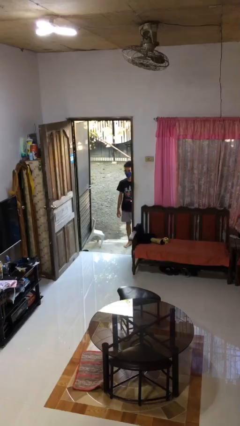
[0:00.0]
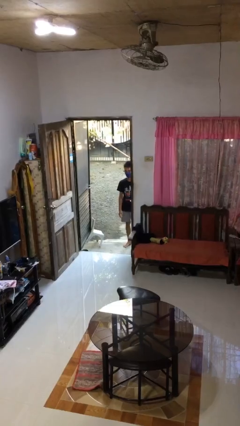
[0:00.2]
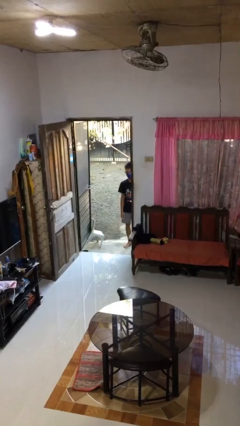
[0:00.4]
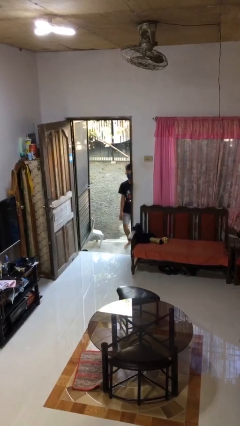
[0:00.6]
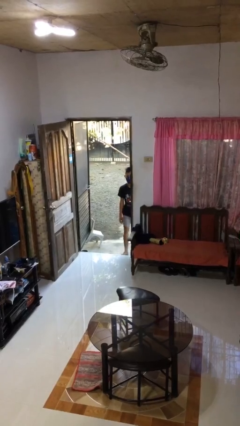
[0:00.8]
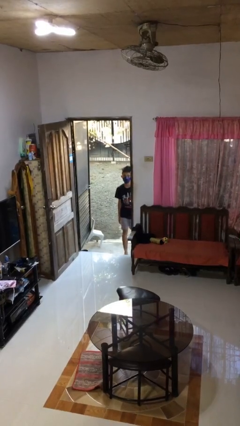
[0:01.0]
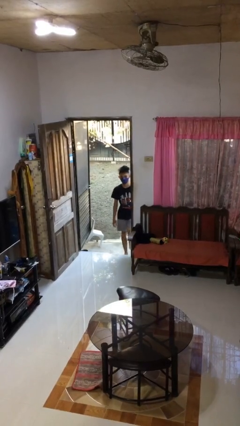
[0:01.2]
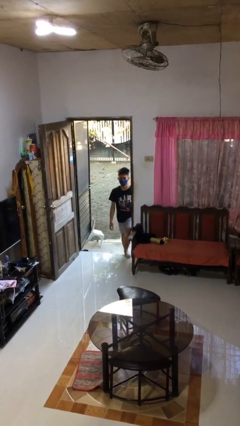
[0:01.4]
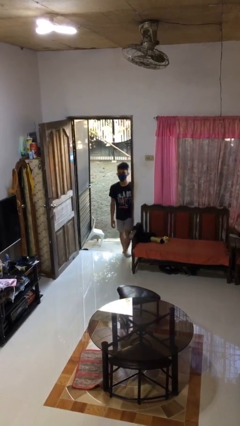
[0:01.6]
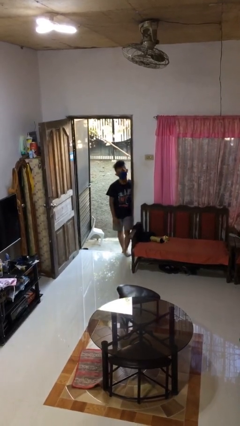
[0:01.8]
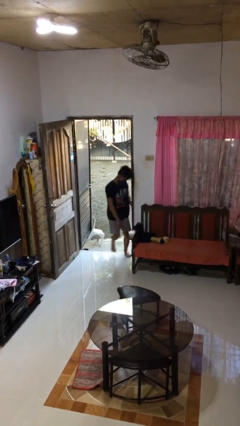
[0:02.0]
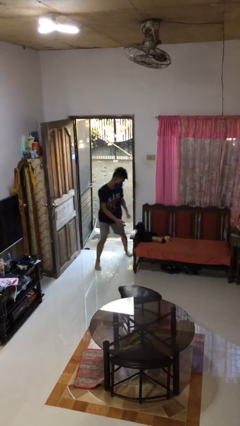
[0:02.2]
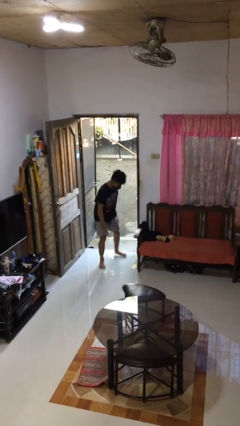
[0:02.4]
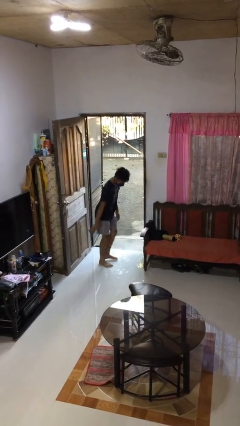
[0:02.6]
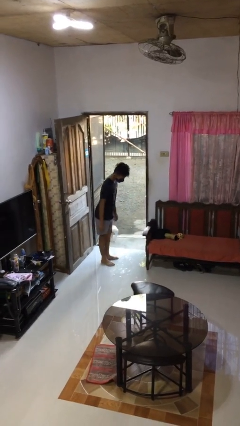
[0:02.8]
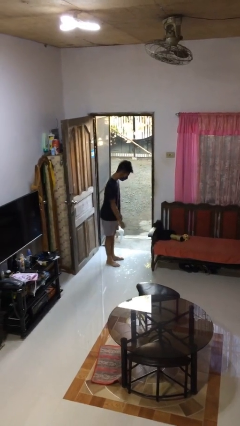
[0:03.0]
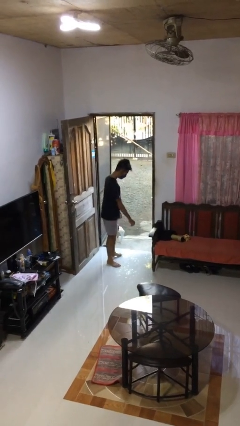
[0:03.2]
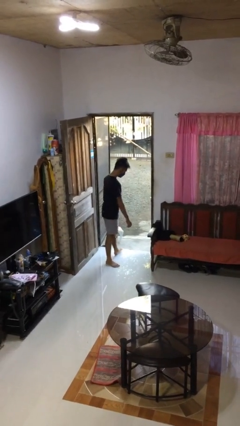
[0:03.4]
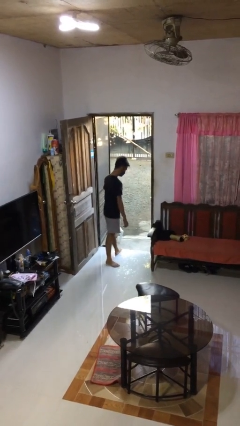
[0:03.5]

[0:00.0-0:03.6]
person bumps into wall

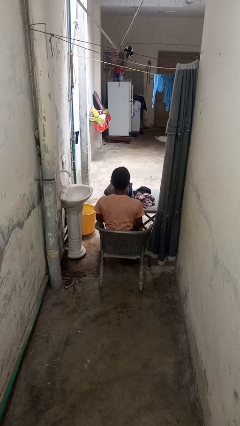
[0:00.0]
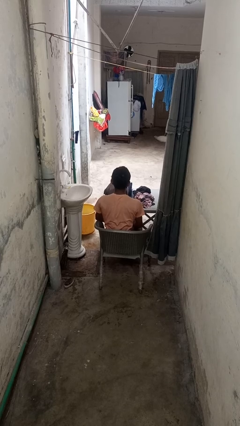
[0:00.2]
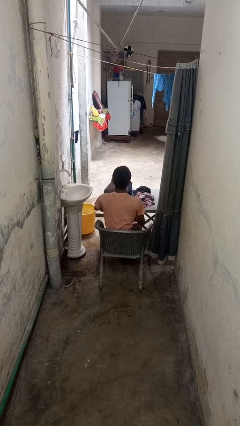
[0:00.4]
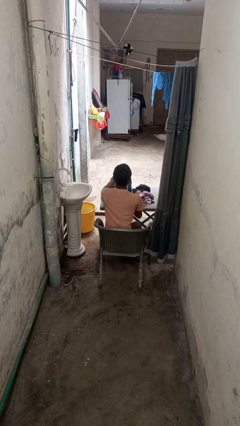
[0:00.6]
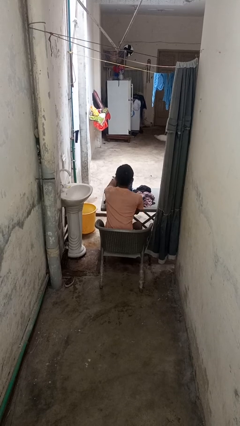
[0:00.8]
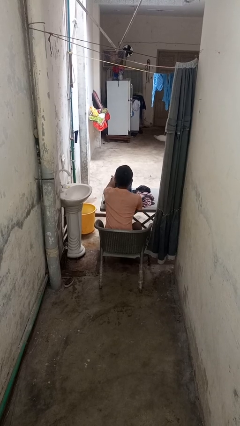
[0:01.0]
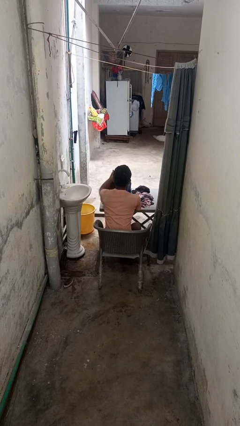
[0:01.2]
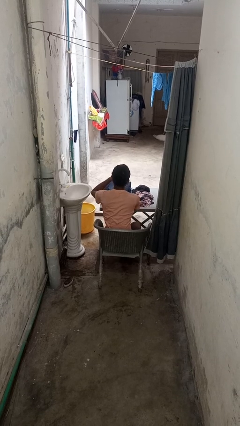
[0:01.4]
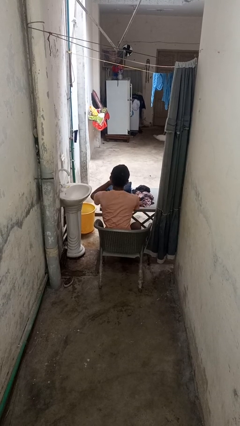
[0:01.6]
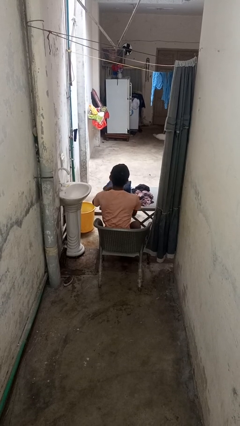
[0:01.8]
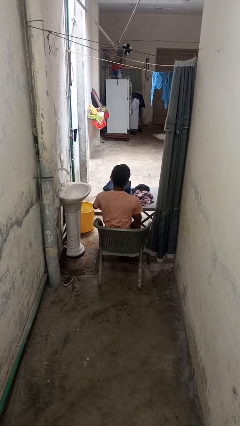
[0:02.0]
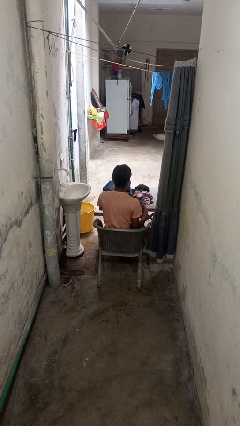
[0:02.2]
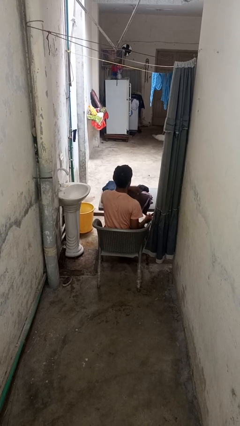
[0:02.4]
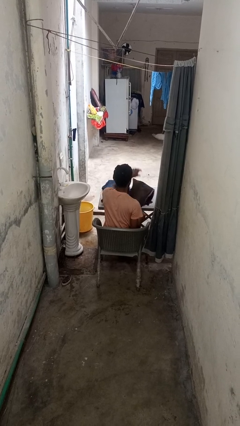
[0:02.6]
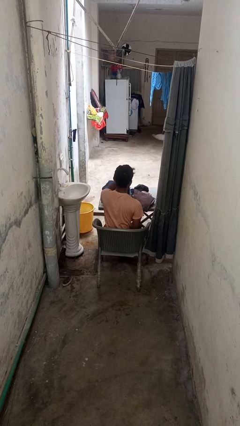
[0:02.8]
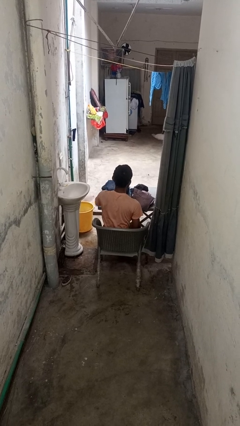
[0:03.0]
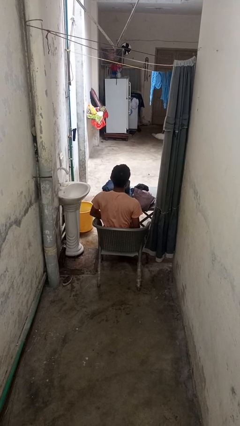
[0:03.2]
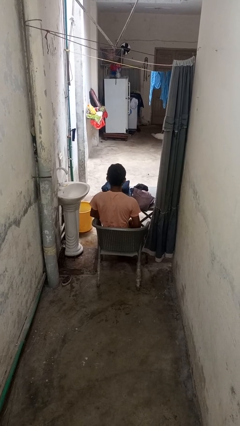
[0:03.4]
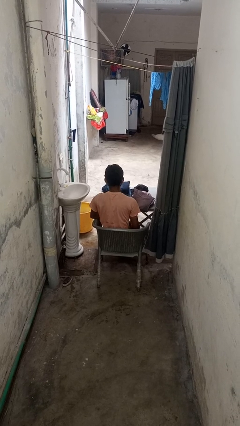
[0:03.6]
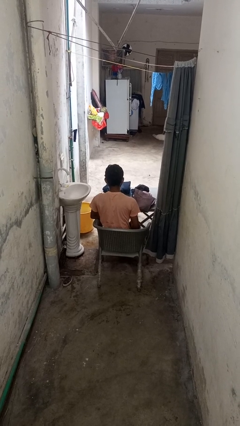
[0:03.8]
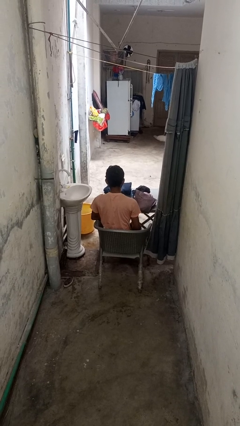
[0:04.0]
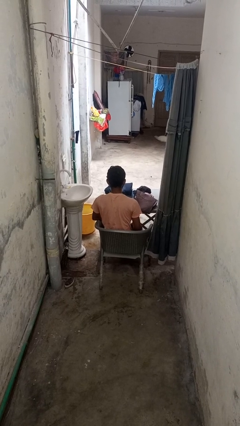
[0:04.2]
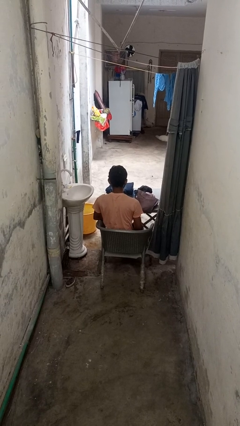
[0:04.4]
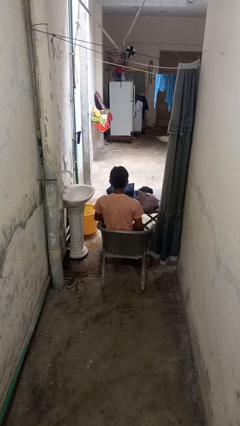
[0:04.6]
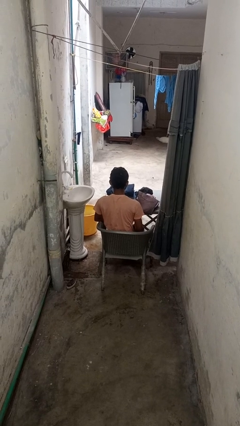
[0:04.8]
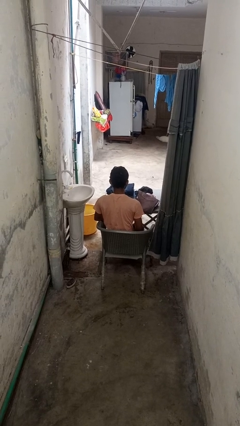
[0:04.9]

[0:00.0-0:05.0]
person folds pants

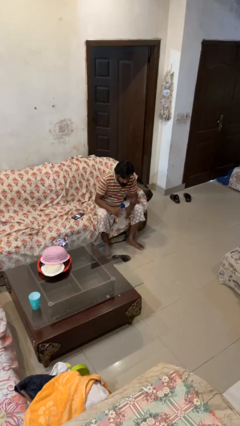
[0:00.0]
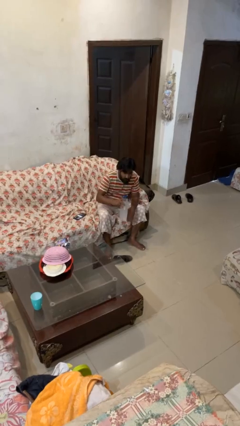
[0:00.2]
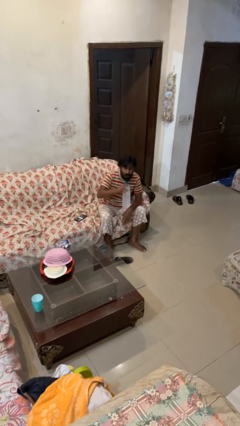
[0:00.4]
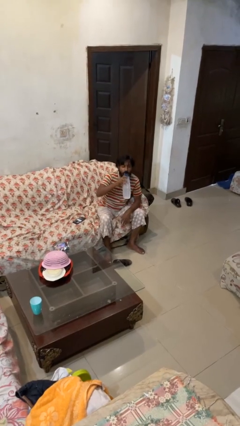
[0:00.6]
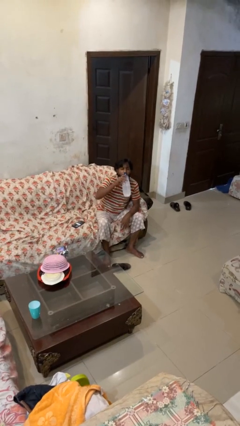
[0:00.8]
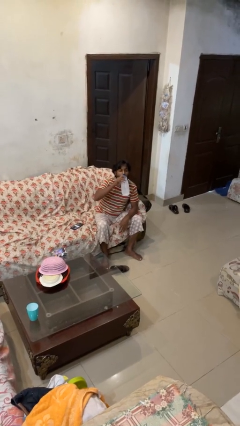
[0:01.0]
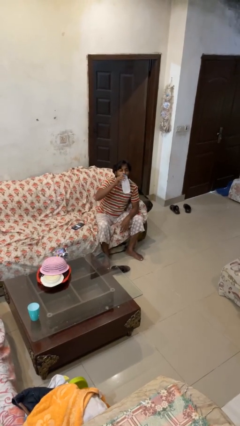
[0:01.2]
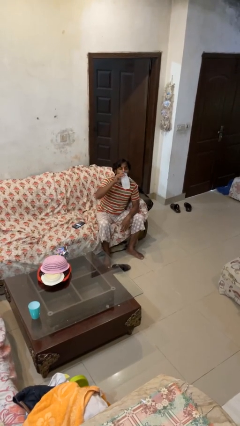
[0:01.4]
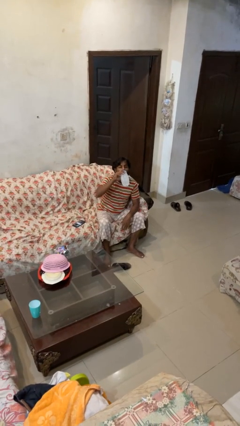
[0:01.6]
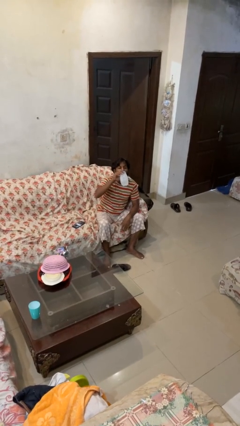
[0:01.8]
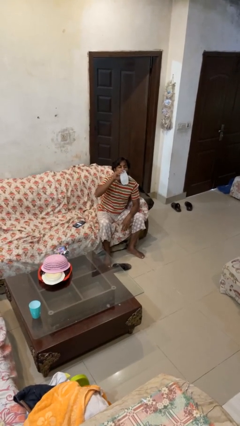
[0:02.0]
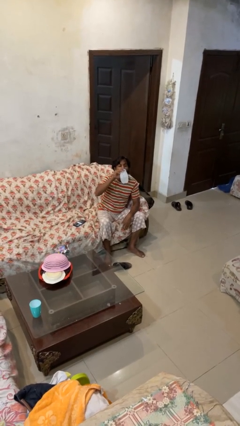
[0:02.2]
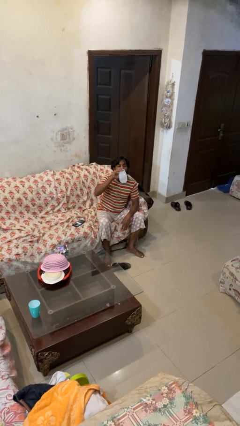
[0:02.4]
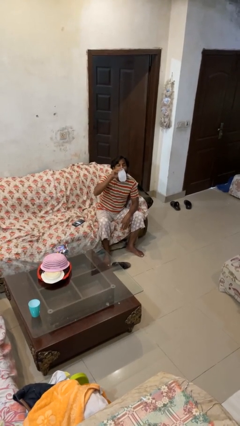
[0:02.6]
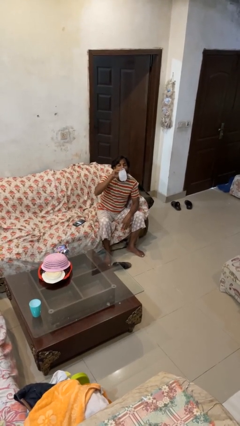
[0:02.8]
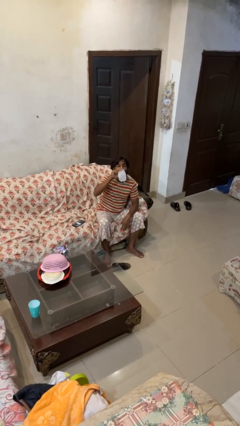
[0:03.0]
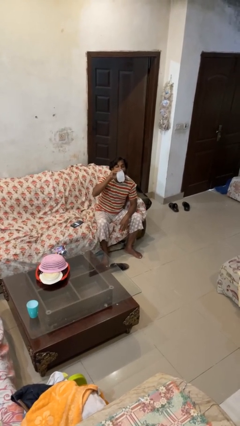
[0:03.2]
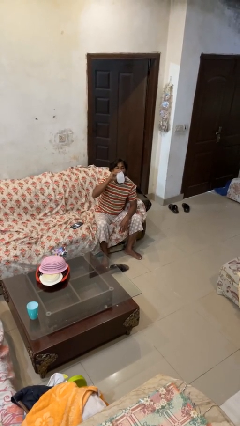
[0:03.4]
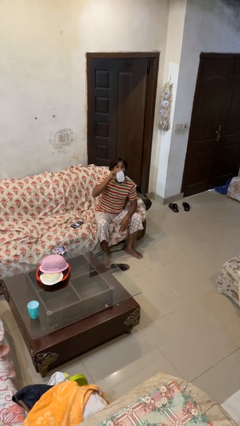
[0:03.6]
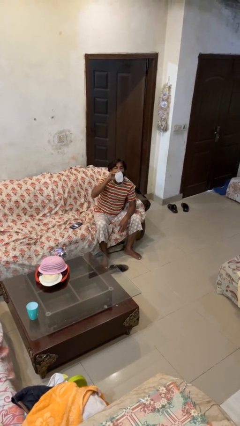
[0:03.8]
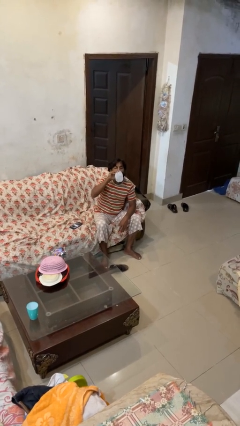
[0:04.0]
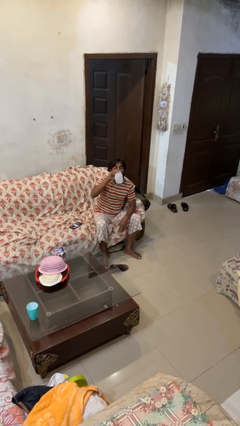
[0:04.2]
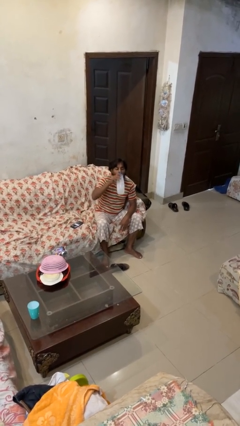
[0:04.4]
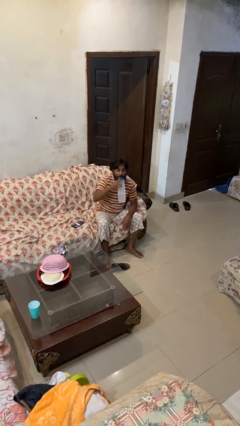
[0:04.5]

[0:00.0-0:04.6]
person drinks from bottle

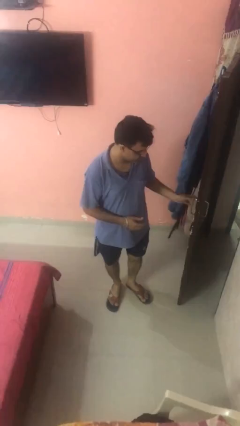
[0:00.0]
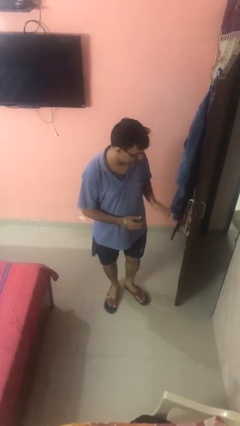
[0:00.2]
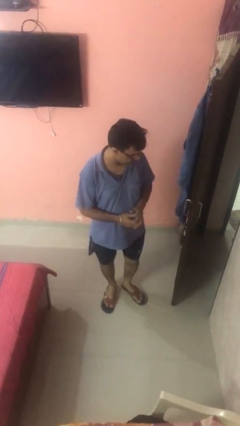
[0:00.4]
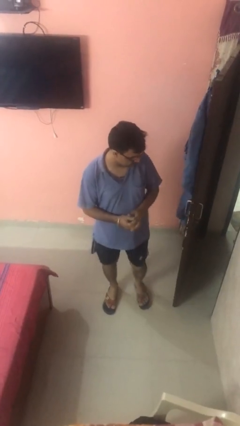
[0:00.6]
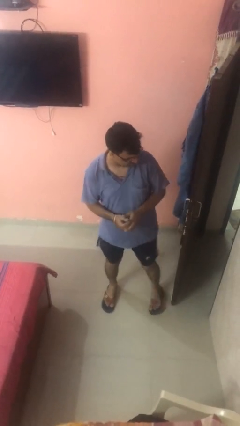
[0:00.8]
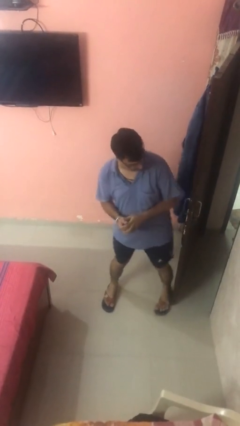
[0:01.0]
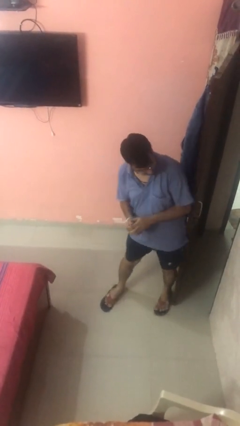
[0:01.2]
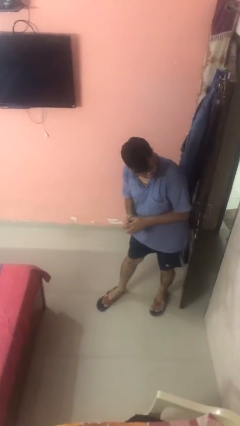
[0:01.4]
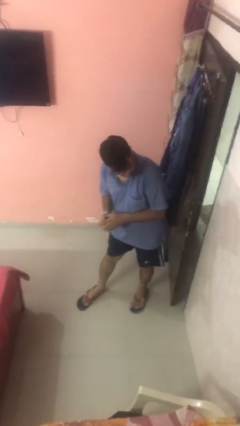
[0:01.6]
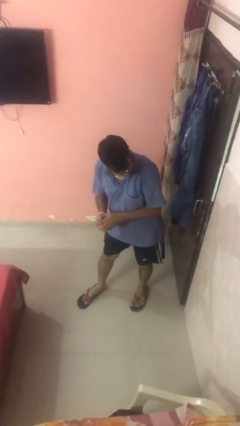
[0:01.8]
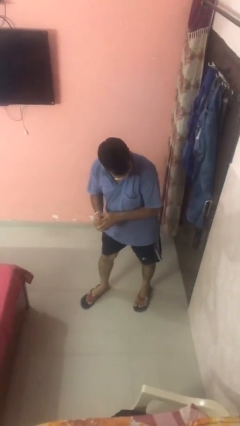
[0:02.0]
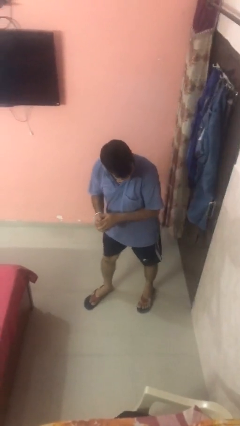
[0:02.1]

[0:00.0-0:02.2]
person closes door with hip

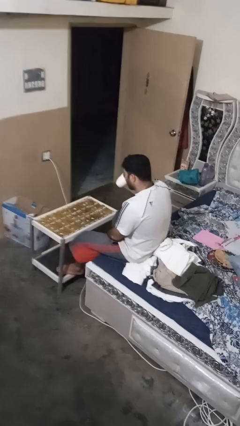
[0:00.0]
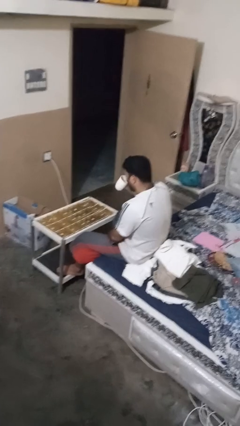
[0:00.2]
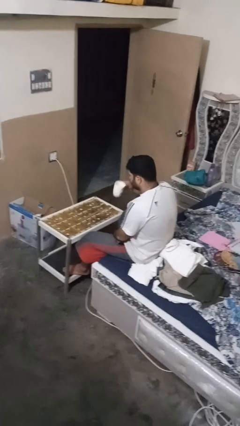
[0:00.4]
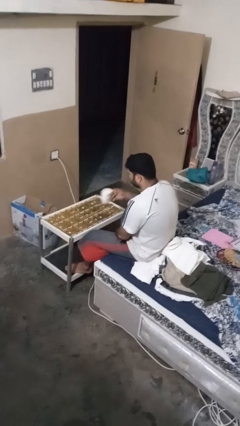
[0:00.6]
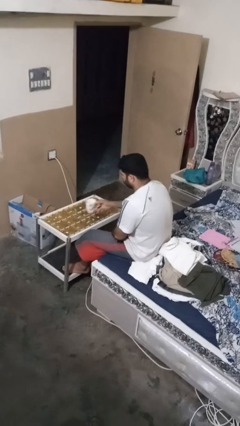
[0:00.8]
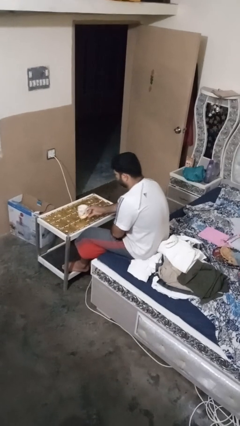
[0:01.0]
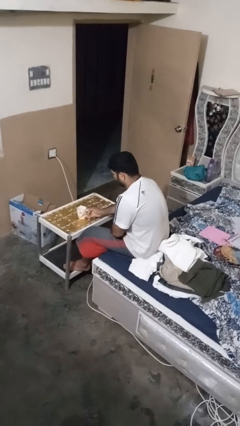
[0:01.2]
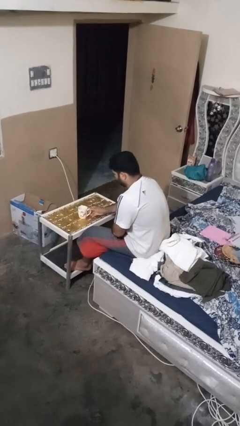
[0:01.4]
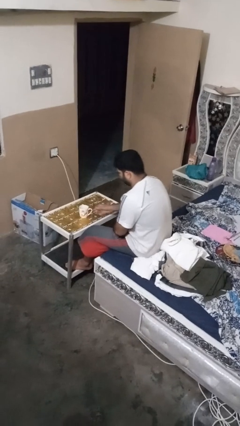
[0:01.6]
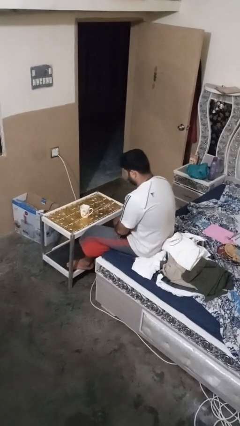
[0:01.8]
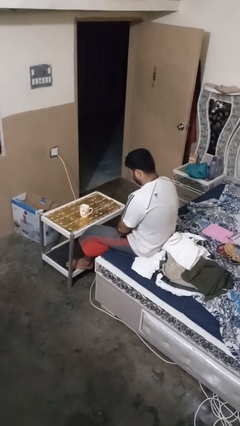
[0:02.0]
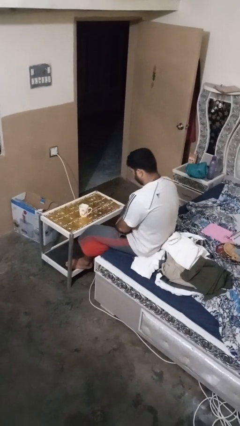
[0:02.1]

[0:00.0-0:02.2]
person puts down object on table
